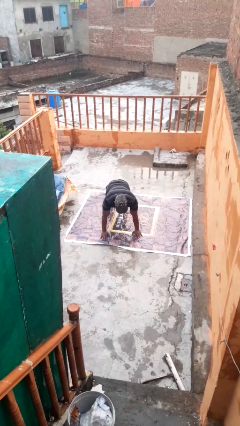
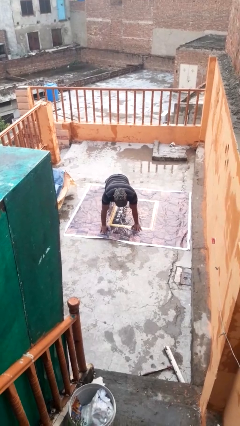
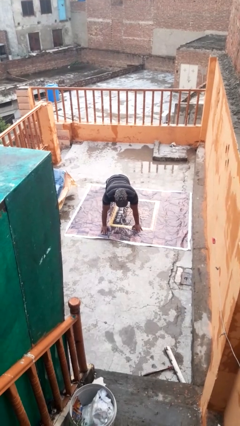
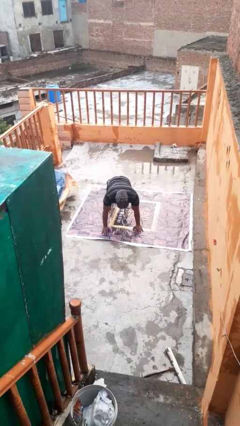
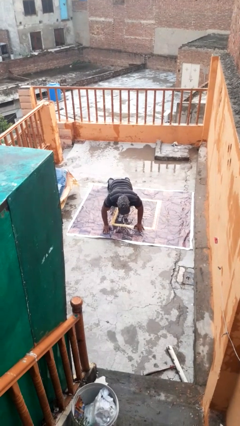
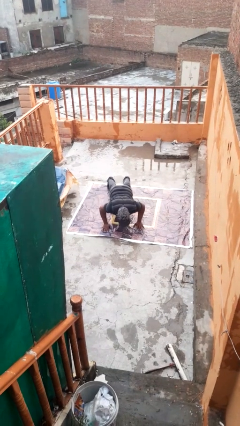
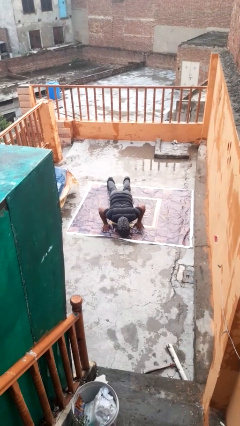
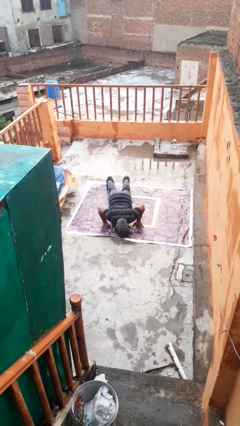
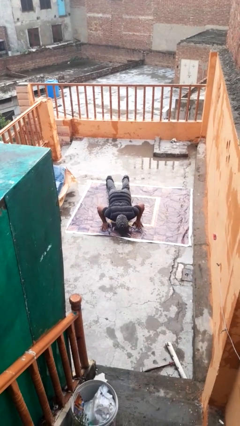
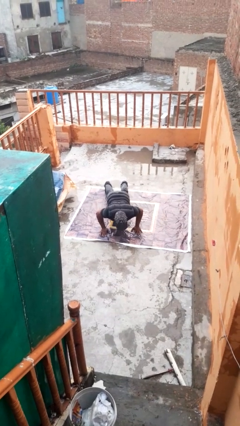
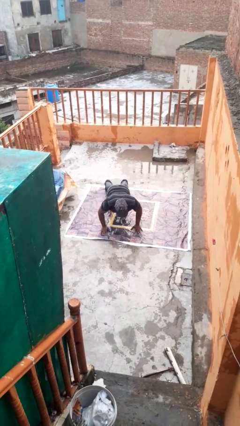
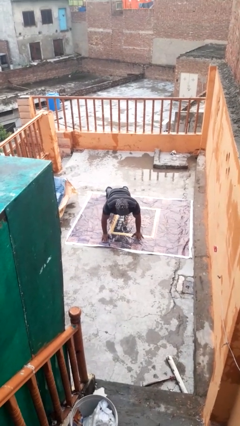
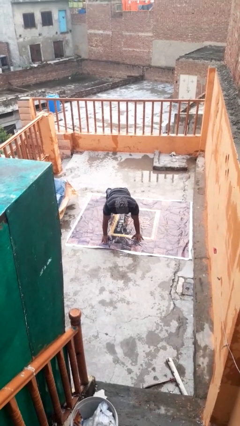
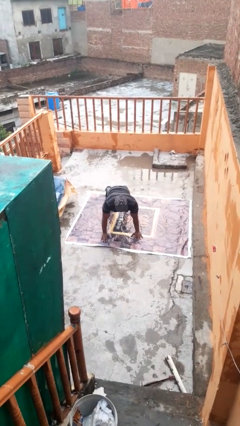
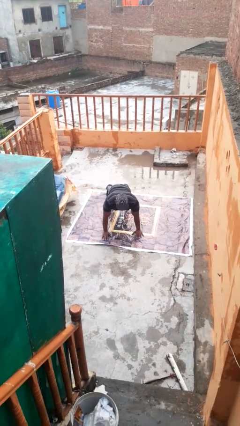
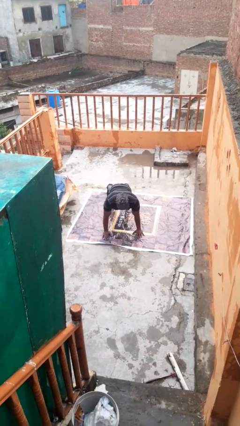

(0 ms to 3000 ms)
person exercises with pushup

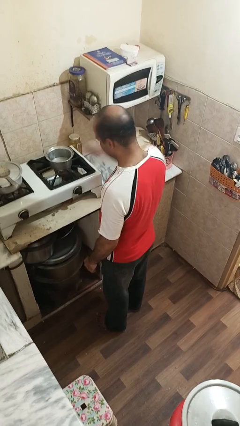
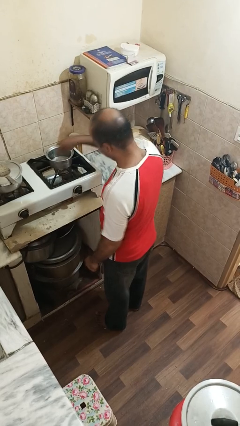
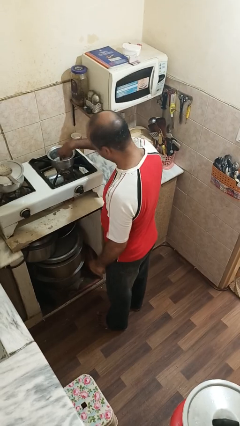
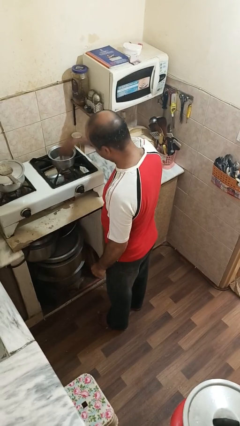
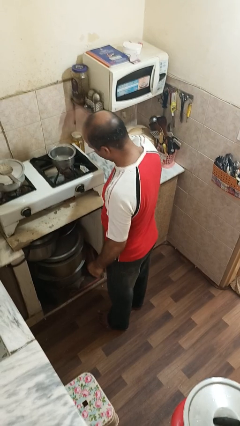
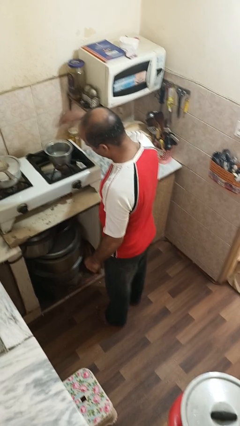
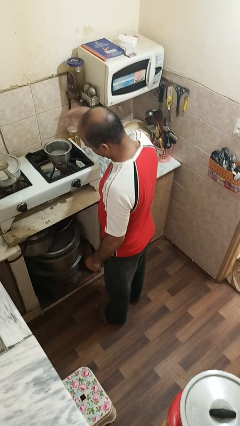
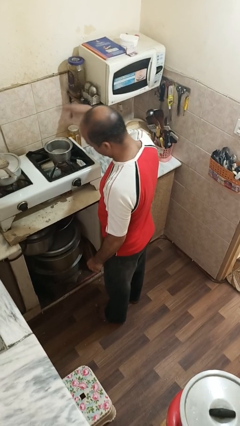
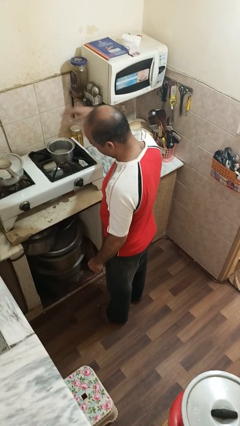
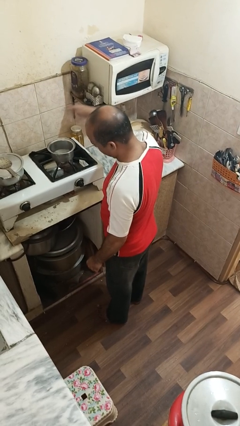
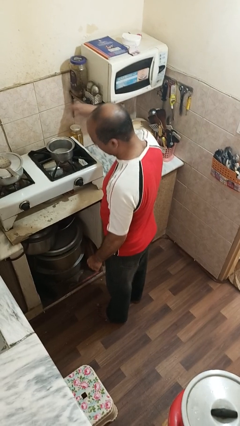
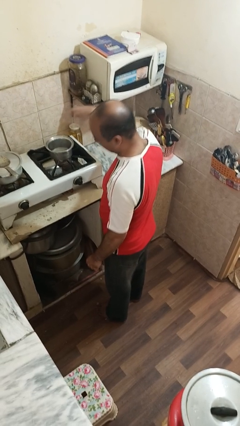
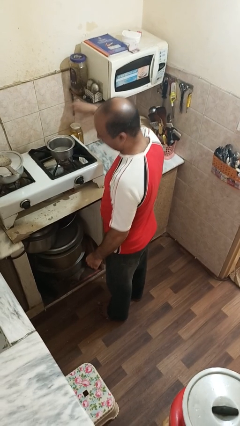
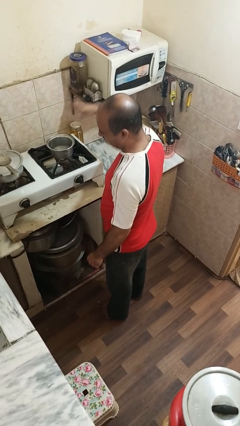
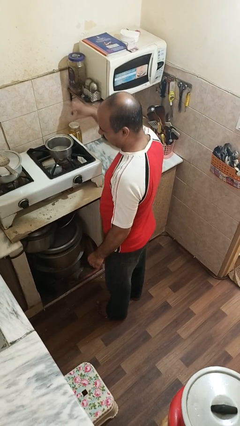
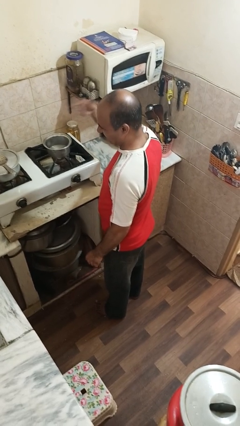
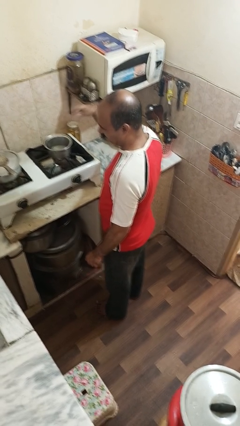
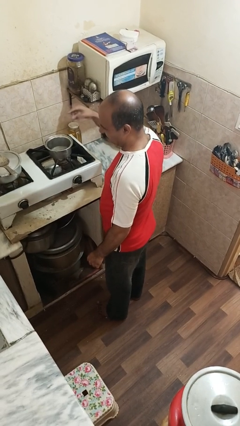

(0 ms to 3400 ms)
person burns hand

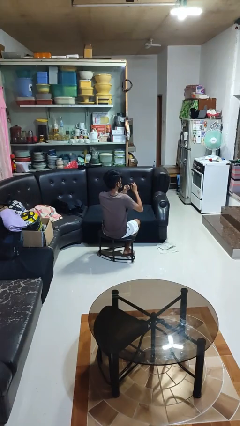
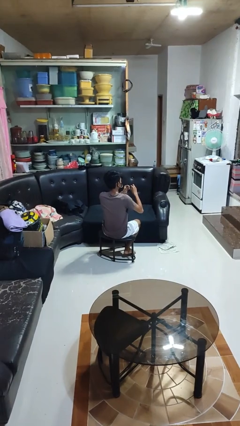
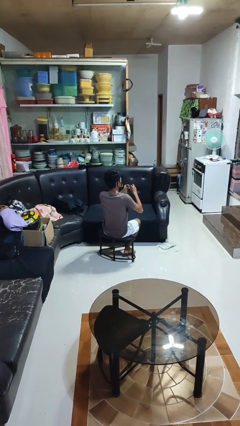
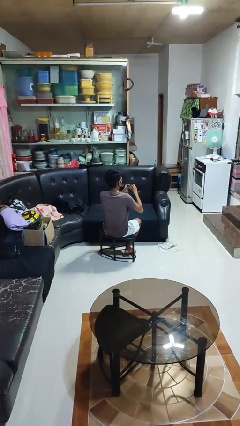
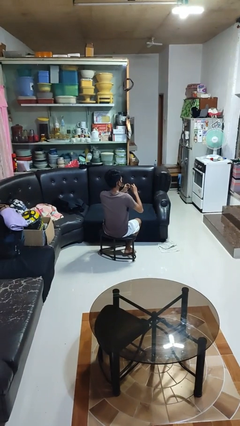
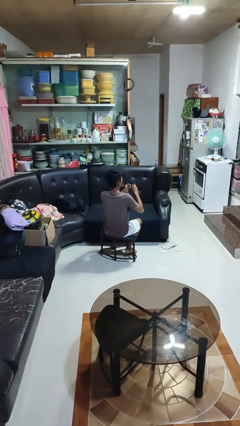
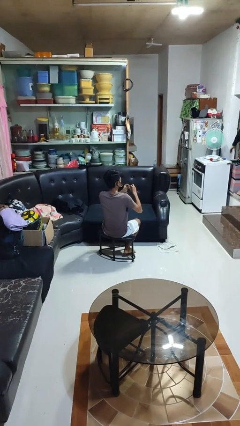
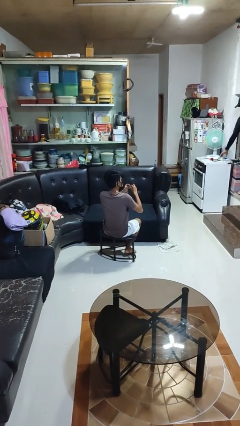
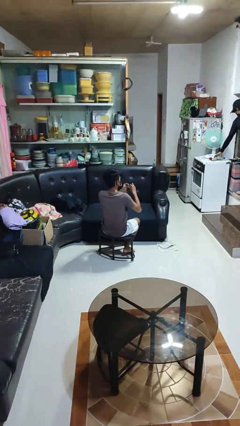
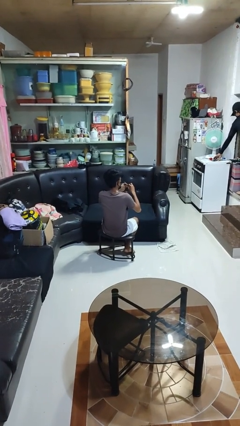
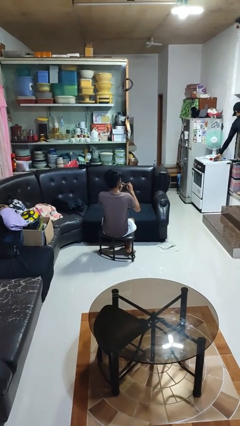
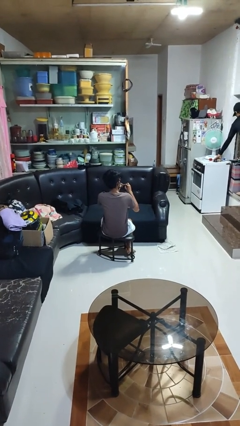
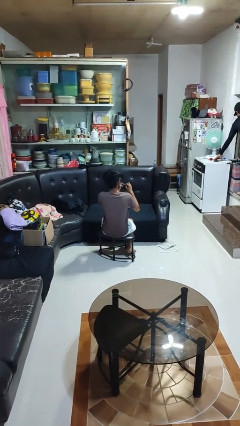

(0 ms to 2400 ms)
person files fingernails

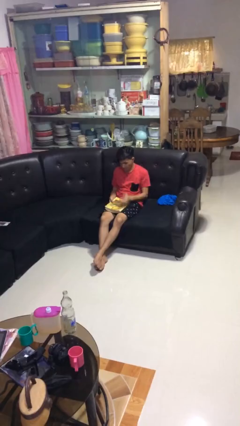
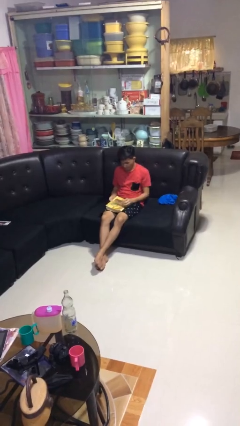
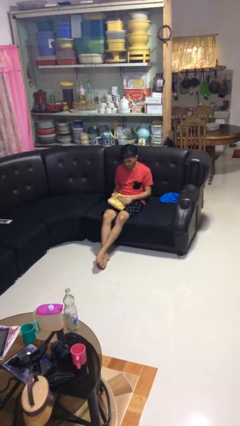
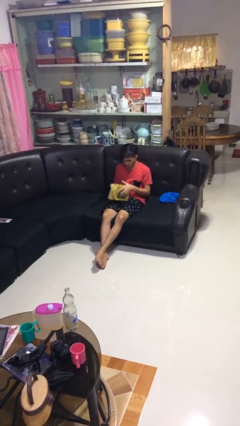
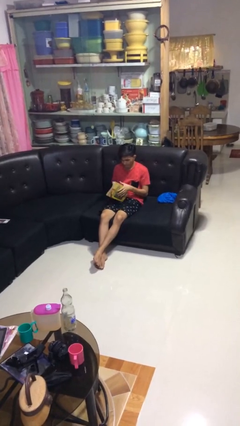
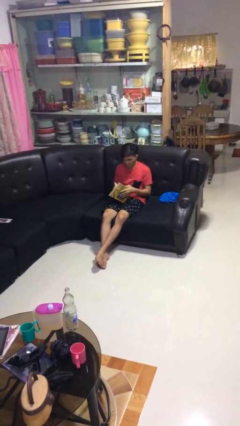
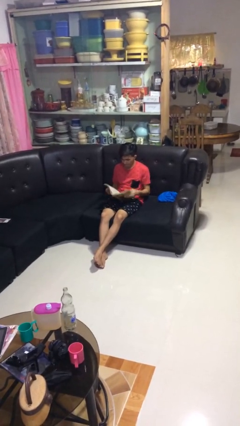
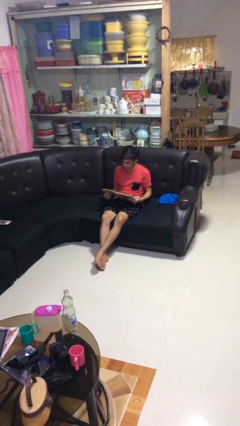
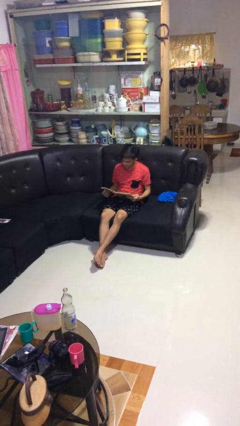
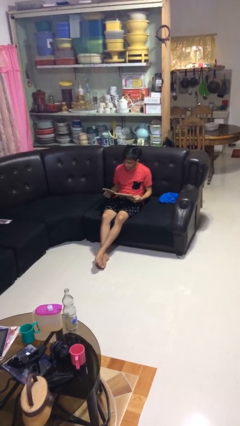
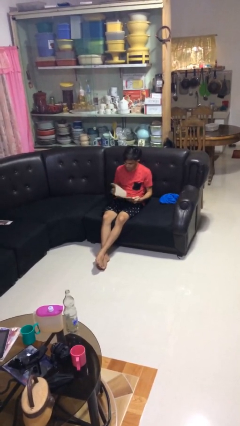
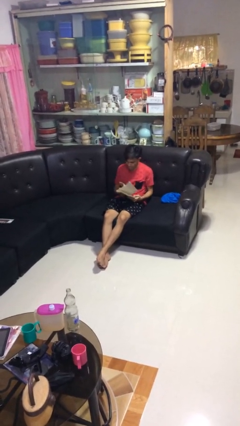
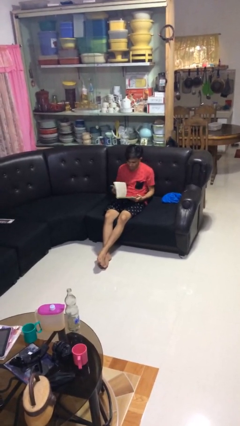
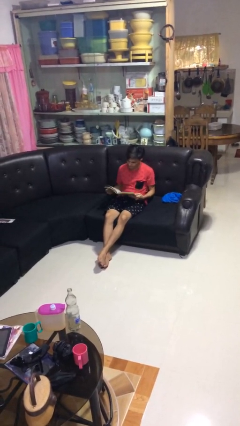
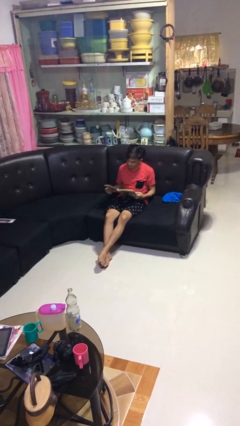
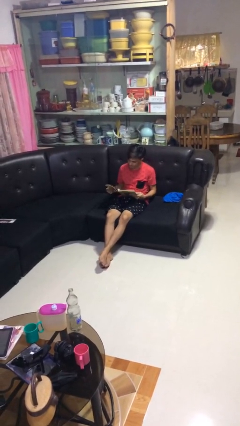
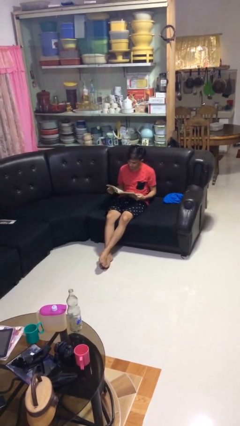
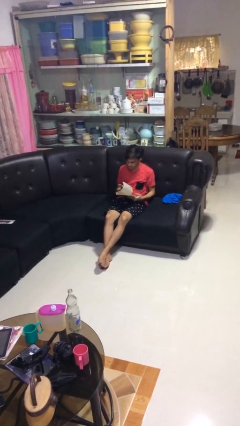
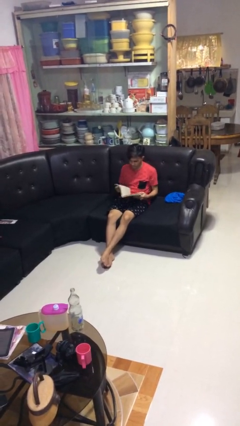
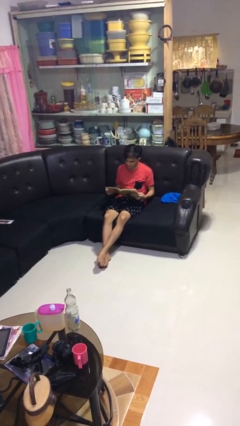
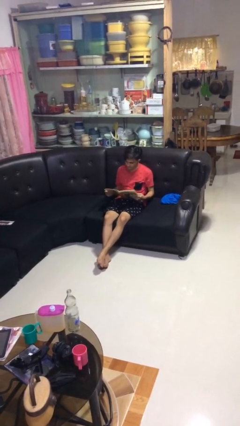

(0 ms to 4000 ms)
person reads book

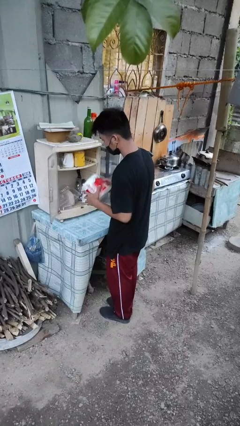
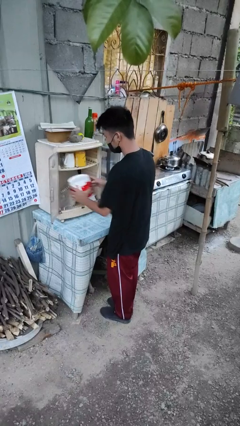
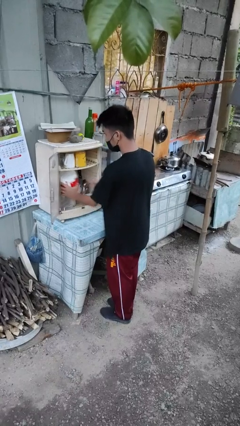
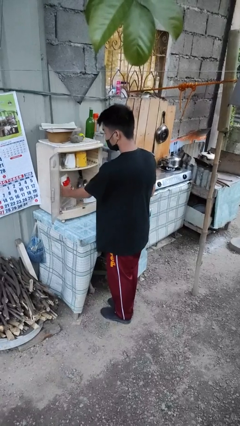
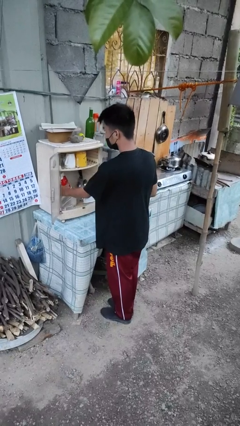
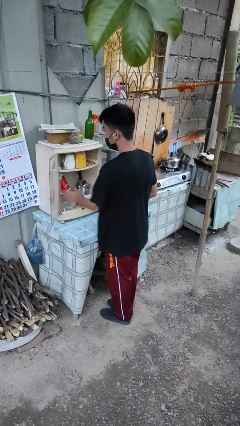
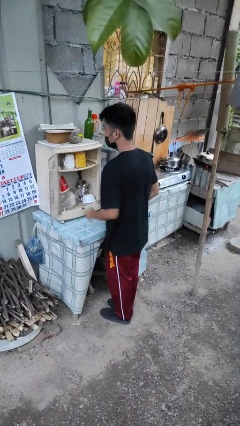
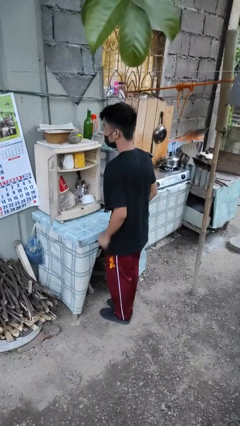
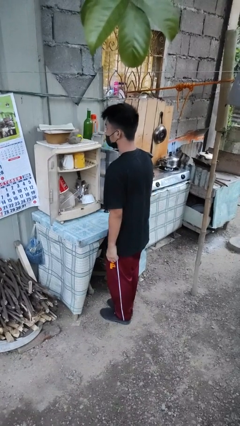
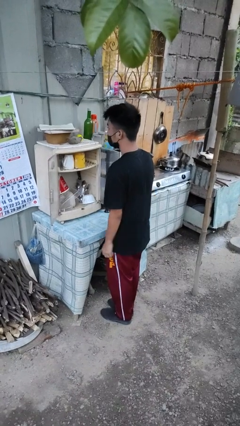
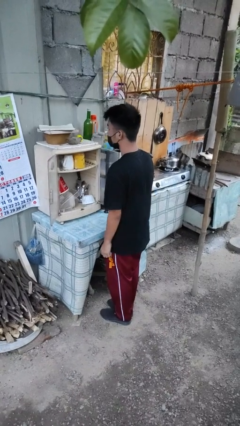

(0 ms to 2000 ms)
person puts down object into cabinet

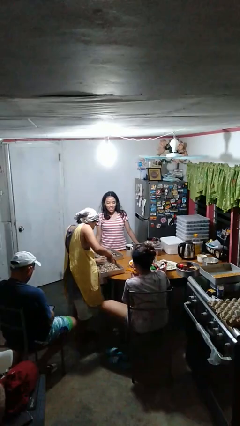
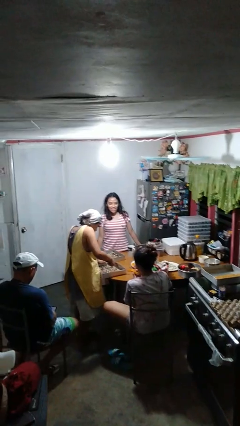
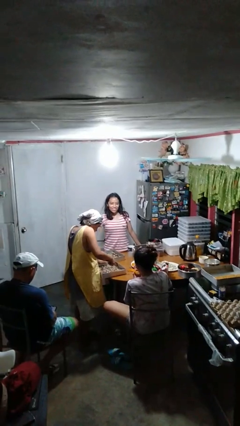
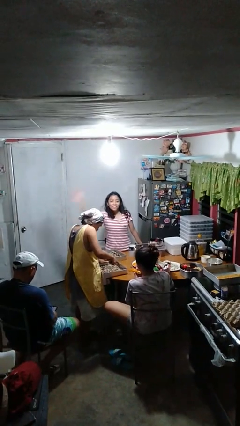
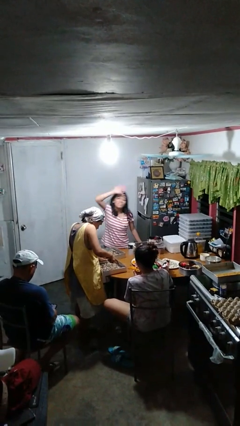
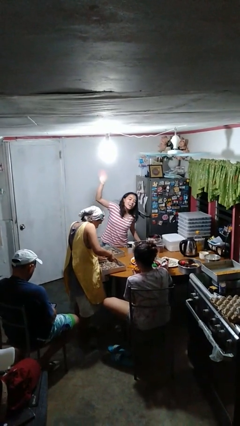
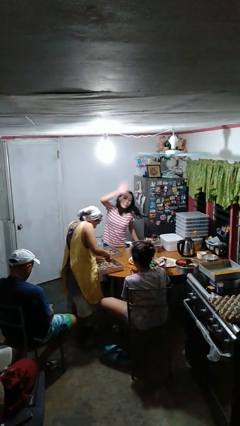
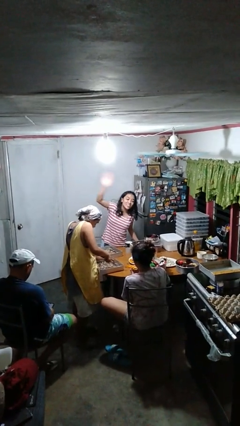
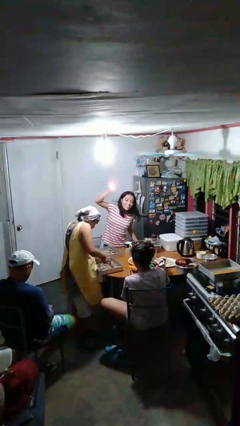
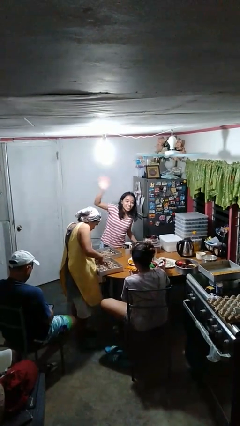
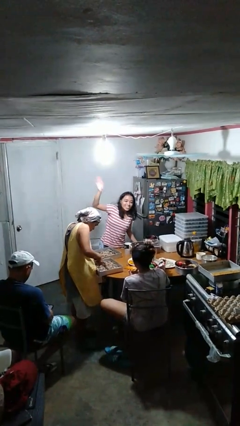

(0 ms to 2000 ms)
person waves at person

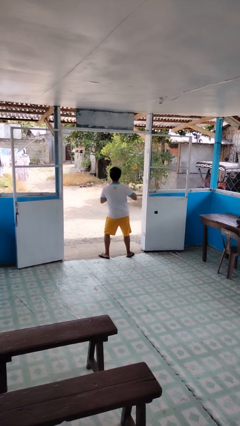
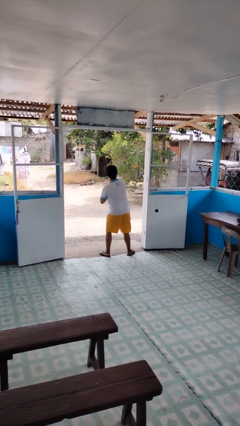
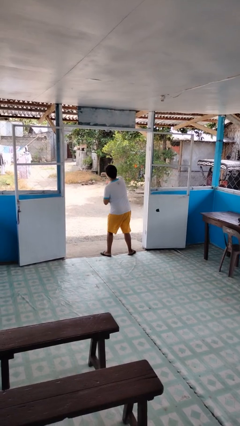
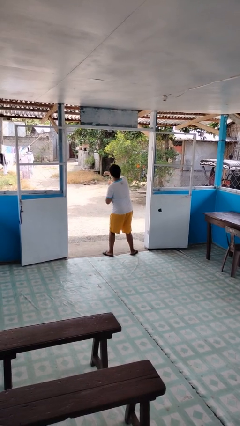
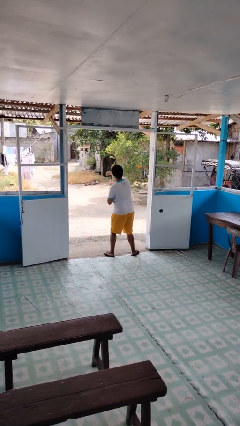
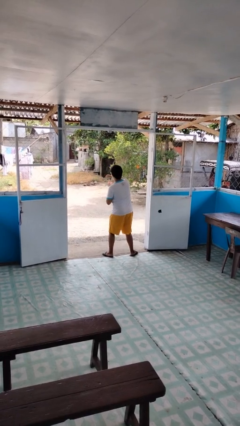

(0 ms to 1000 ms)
person punches
